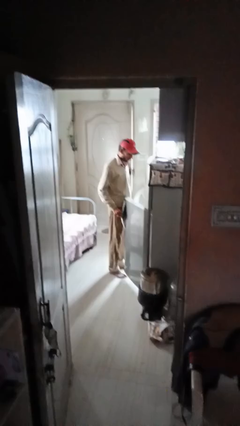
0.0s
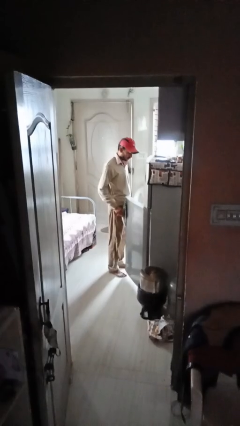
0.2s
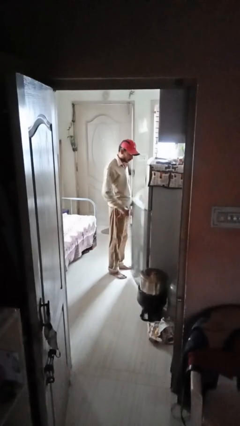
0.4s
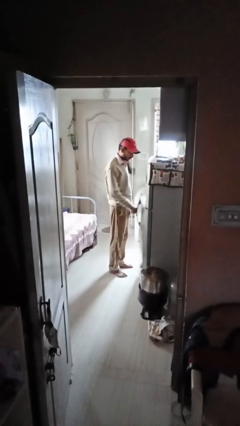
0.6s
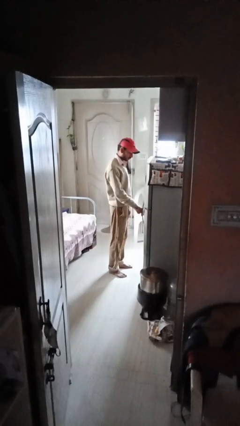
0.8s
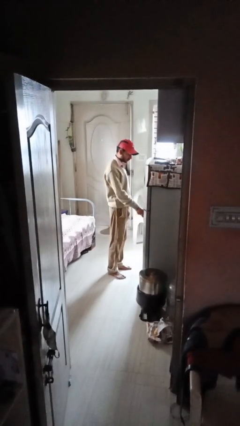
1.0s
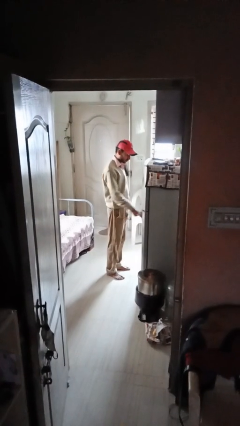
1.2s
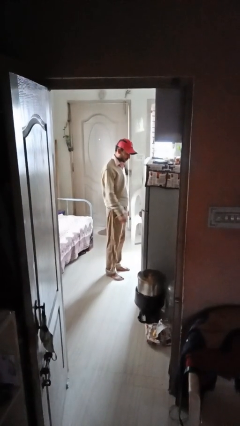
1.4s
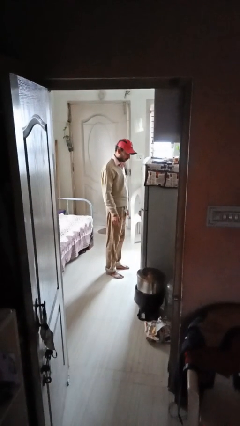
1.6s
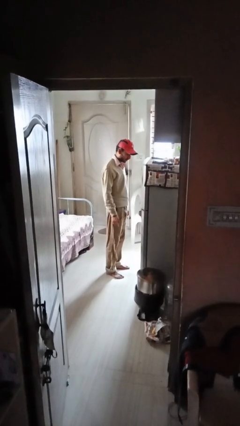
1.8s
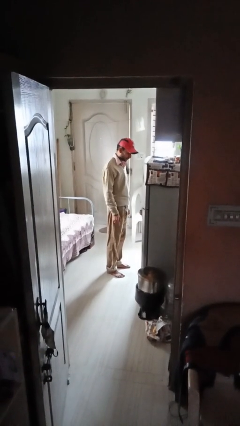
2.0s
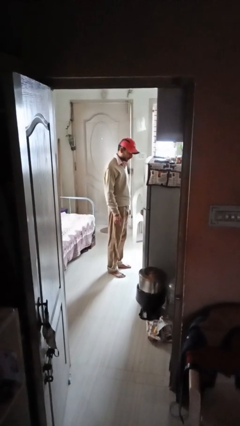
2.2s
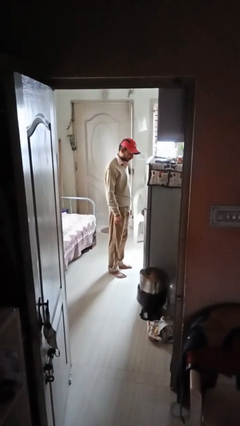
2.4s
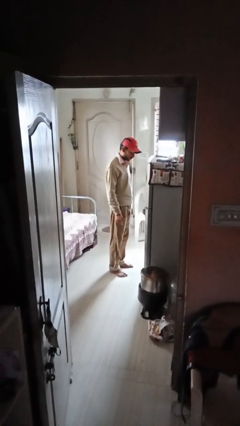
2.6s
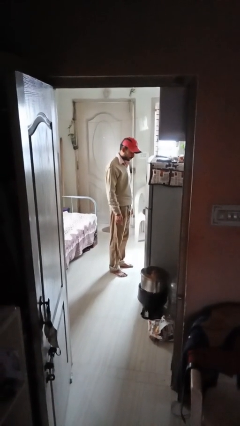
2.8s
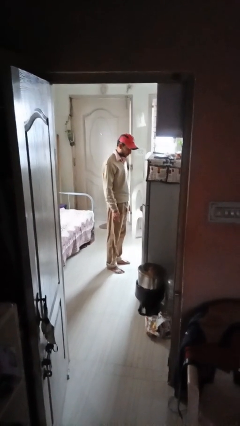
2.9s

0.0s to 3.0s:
person closes refrigerator

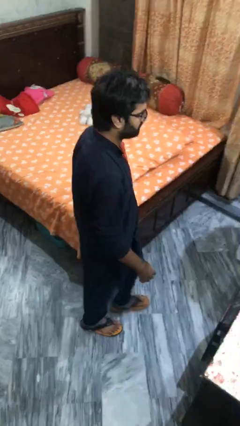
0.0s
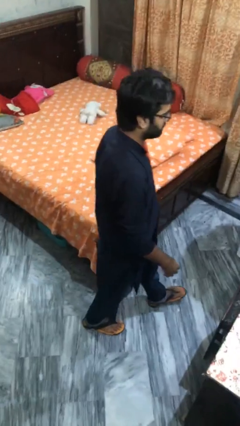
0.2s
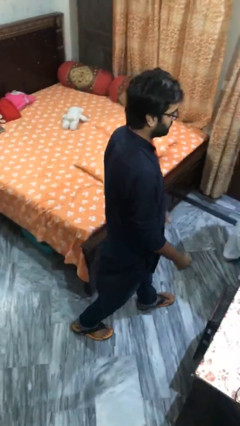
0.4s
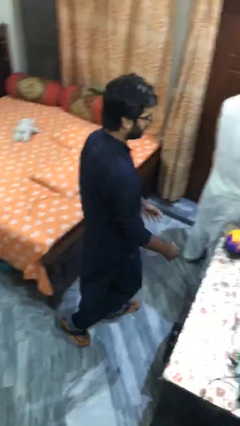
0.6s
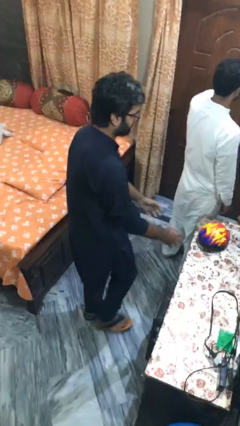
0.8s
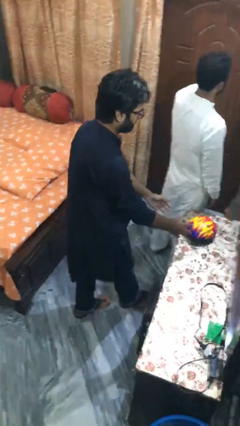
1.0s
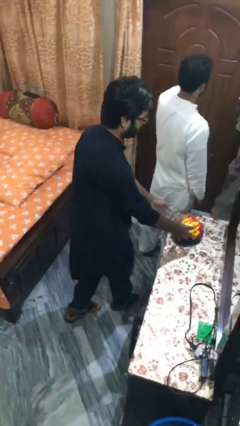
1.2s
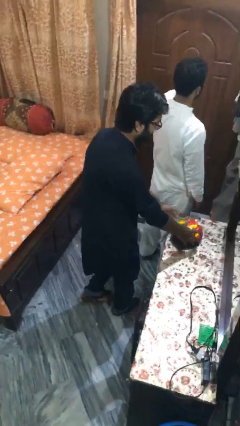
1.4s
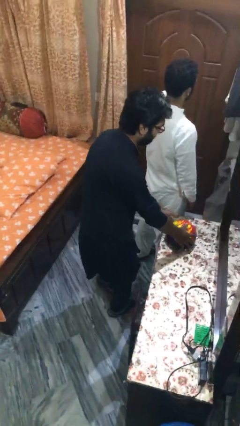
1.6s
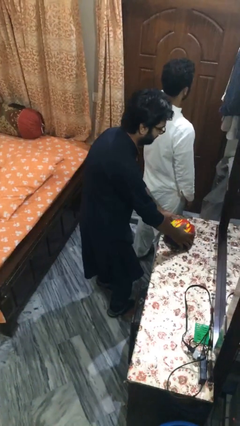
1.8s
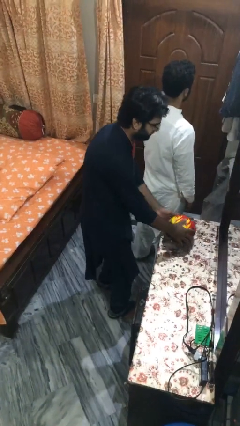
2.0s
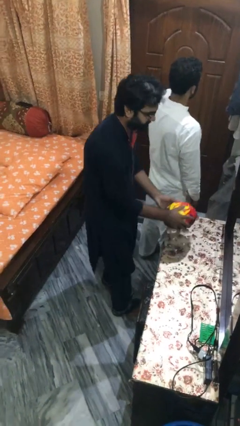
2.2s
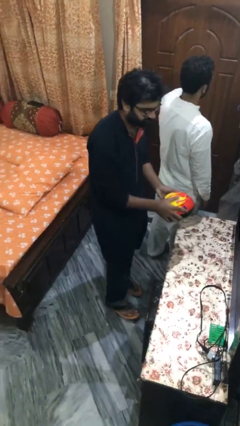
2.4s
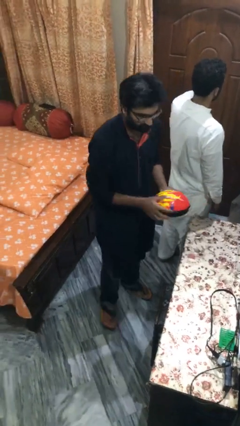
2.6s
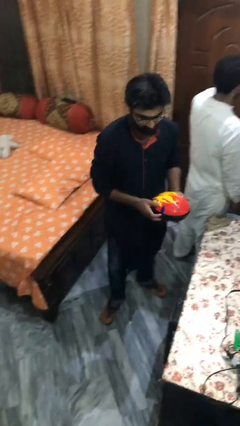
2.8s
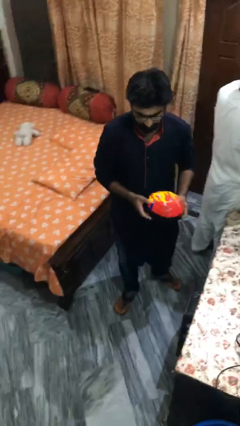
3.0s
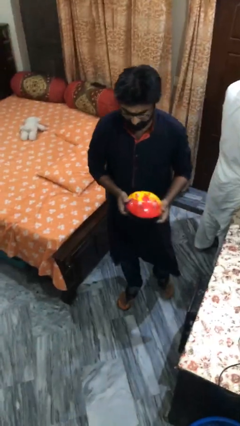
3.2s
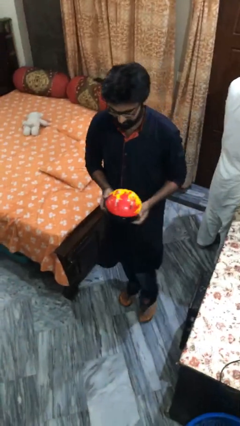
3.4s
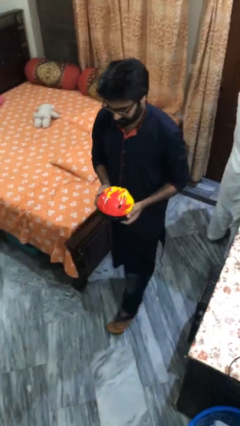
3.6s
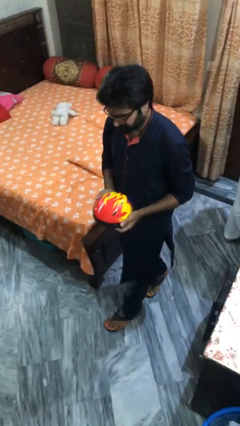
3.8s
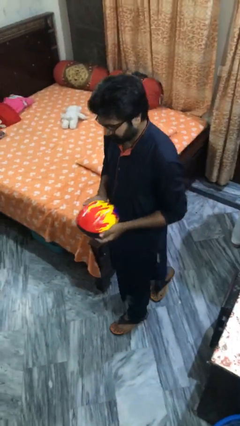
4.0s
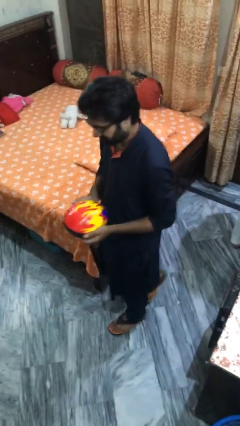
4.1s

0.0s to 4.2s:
person steals object from person

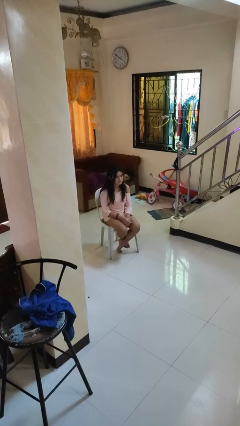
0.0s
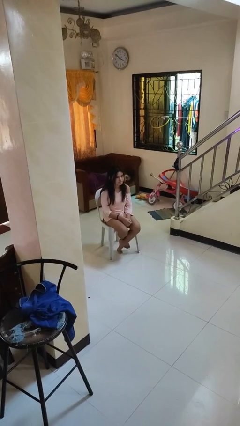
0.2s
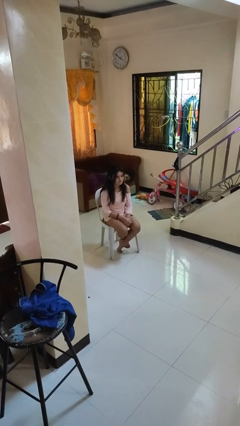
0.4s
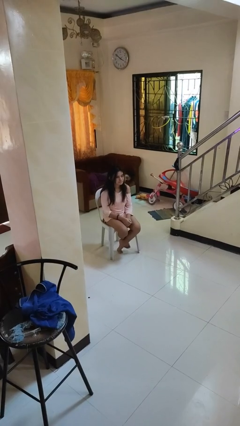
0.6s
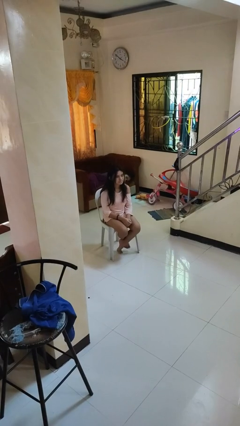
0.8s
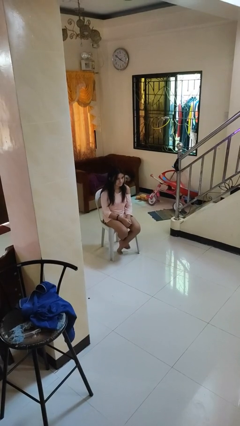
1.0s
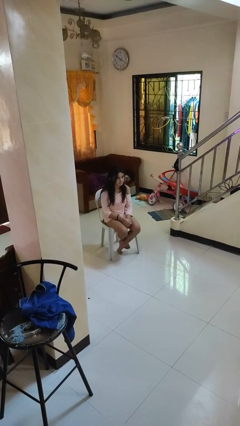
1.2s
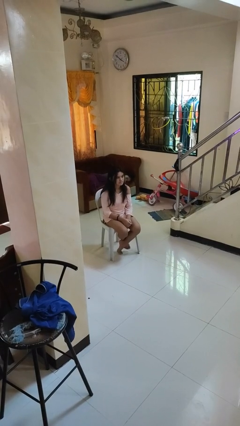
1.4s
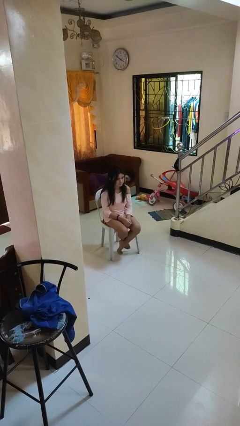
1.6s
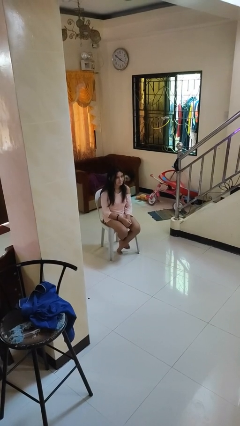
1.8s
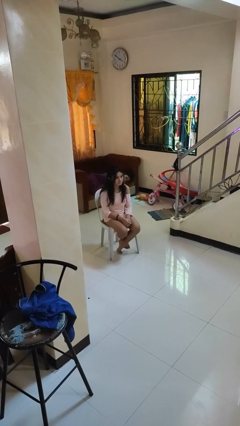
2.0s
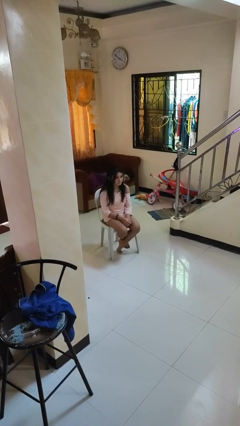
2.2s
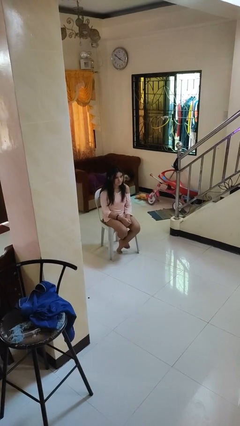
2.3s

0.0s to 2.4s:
person nods head

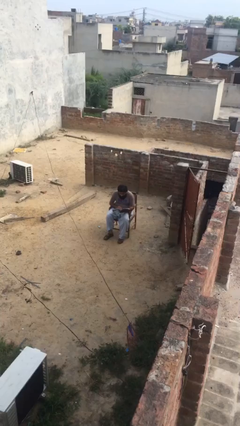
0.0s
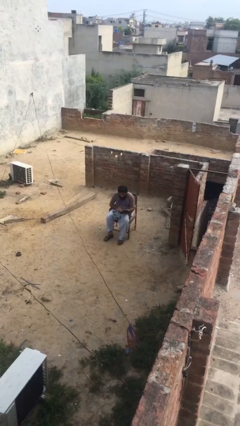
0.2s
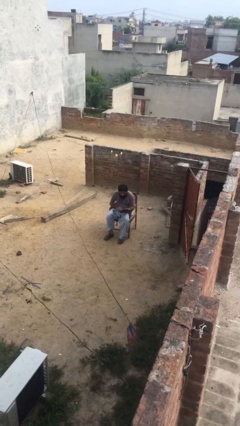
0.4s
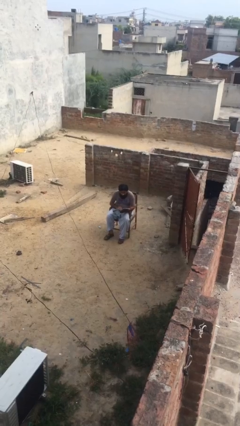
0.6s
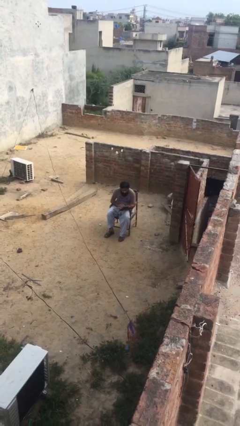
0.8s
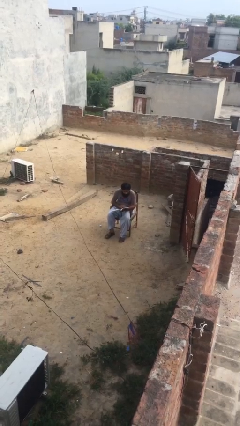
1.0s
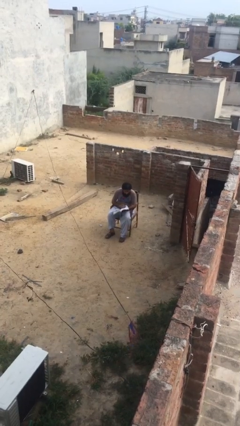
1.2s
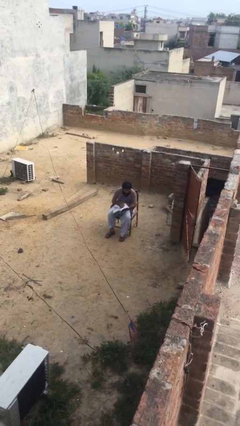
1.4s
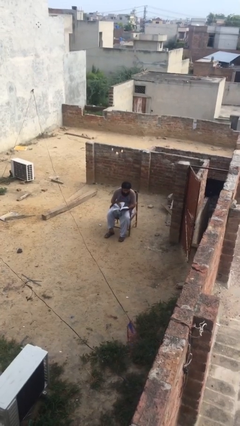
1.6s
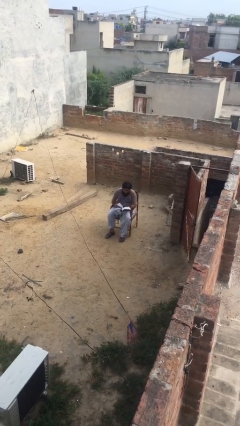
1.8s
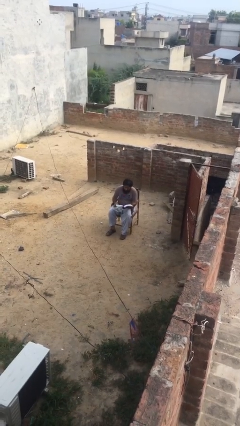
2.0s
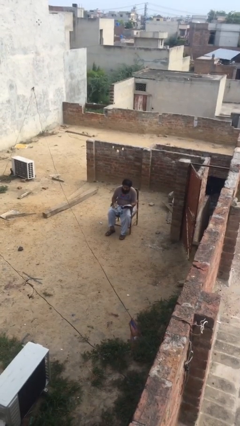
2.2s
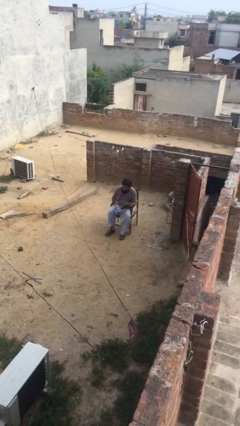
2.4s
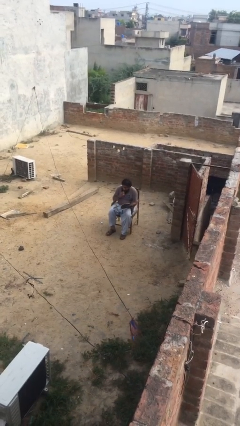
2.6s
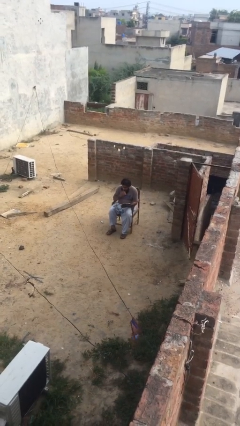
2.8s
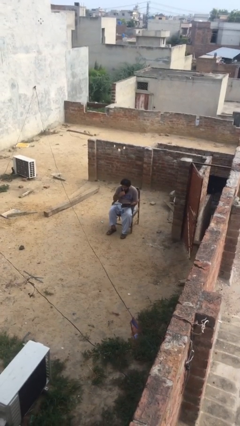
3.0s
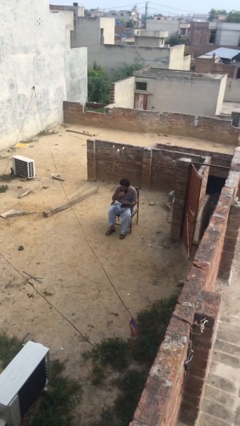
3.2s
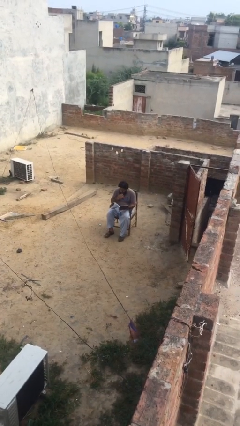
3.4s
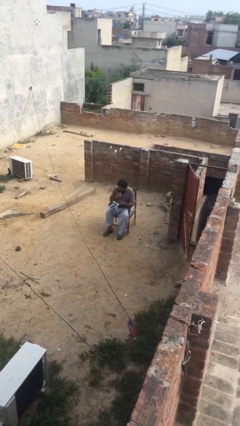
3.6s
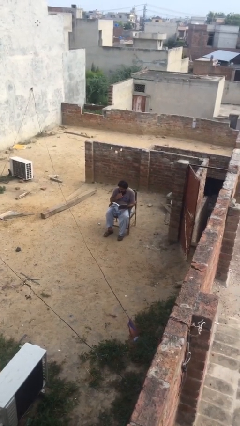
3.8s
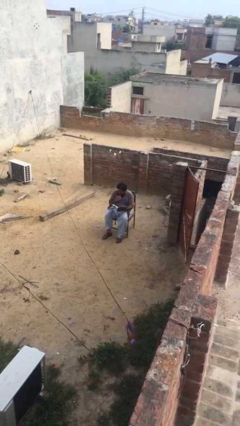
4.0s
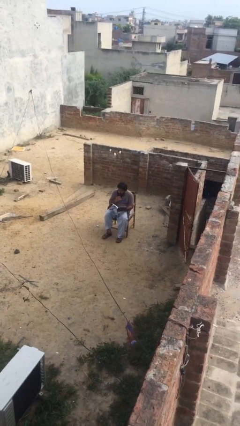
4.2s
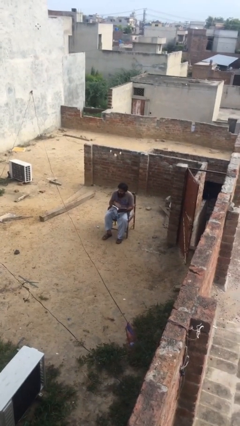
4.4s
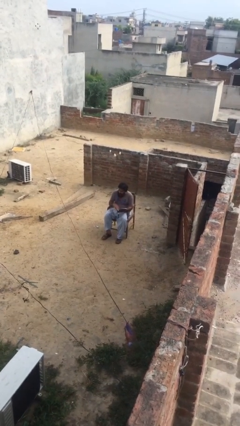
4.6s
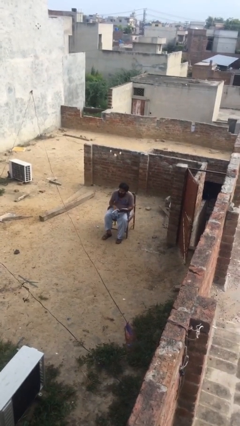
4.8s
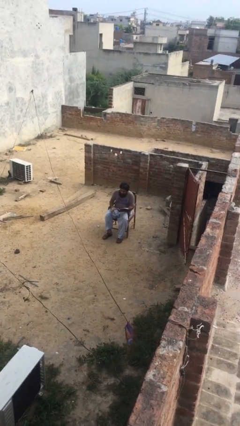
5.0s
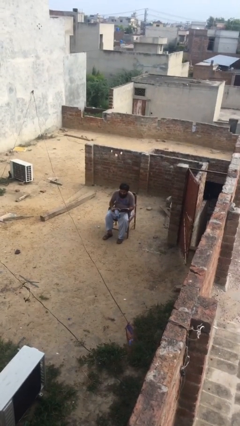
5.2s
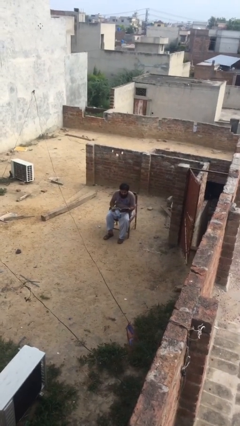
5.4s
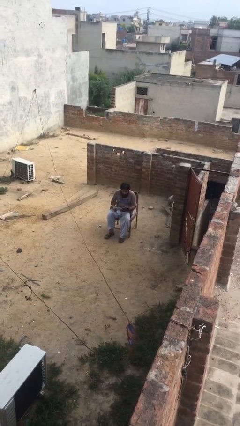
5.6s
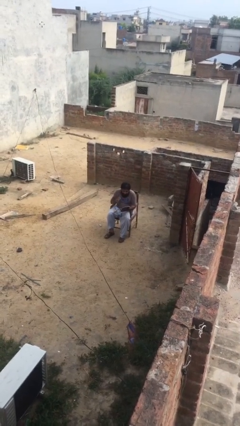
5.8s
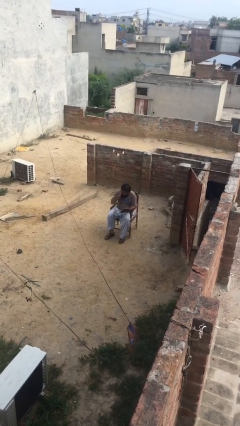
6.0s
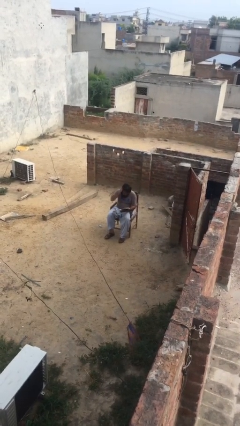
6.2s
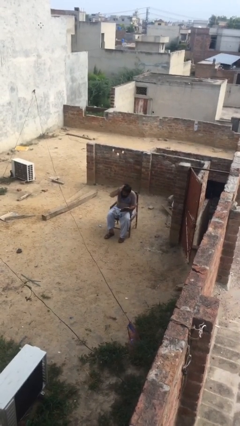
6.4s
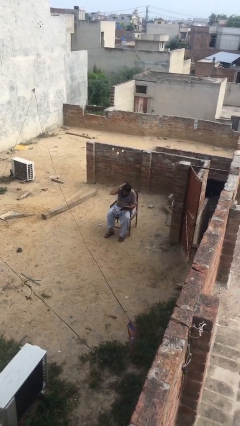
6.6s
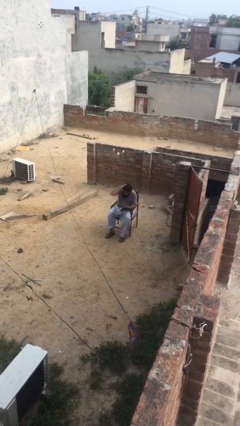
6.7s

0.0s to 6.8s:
person reads document

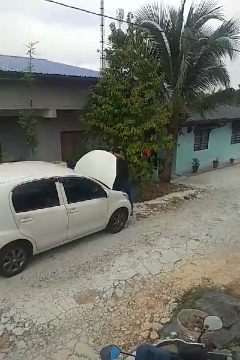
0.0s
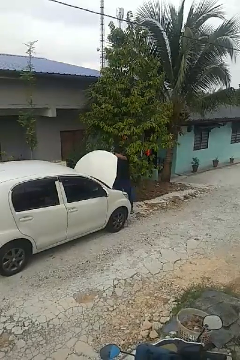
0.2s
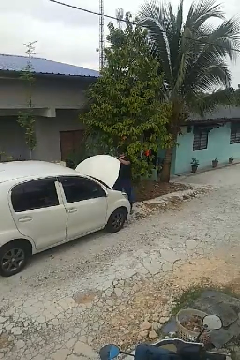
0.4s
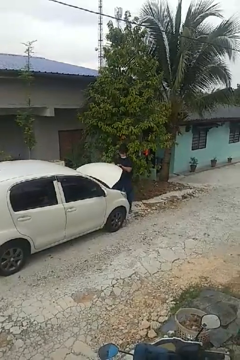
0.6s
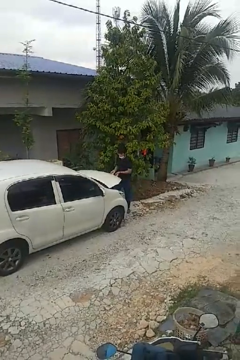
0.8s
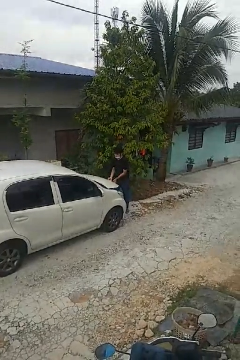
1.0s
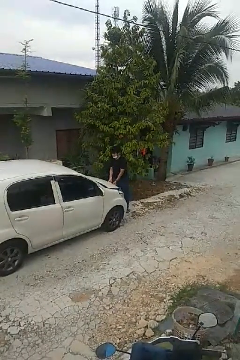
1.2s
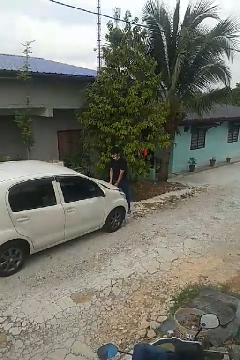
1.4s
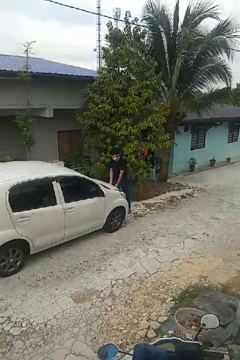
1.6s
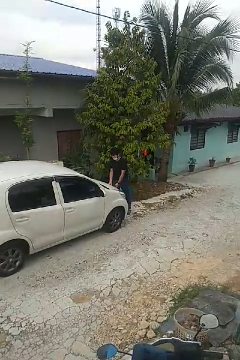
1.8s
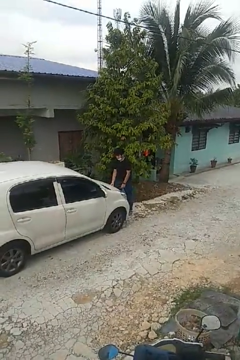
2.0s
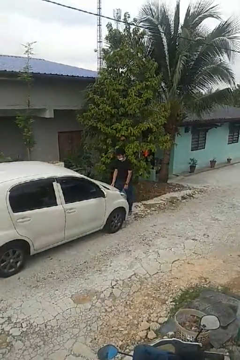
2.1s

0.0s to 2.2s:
person closes car hood
